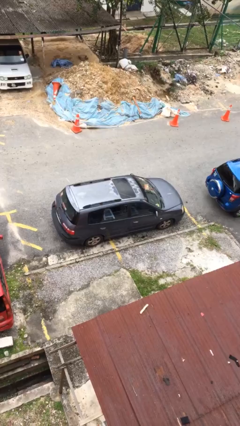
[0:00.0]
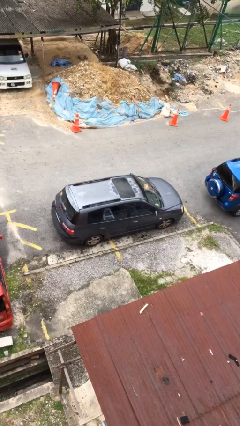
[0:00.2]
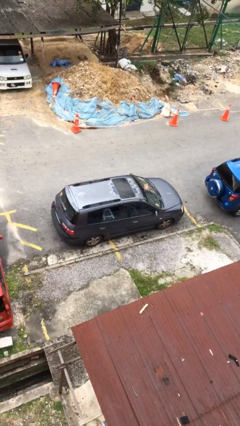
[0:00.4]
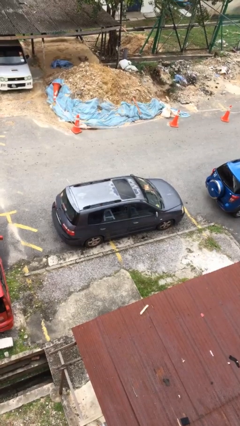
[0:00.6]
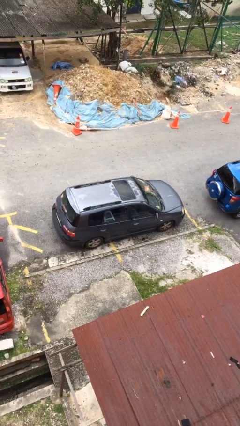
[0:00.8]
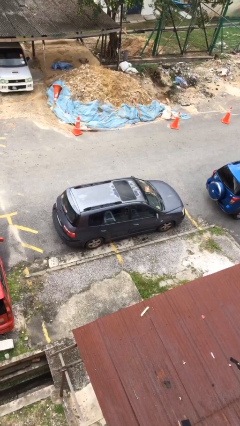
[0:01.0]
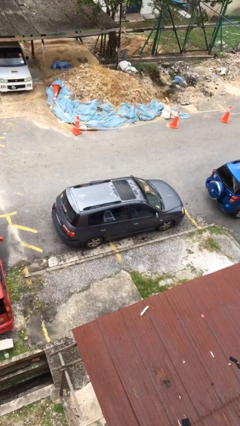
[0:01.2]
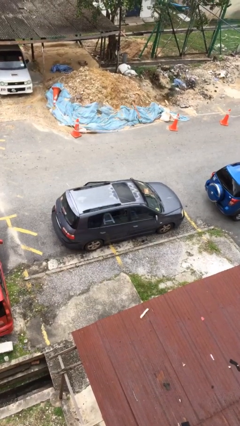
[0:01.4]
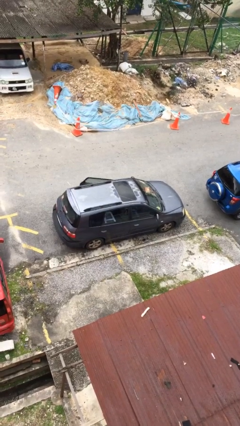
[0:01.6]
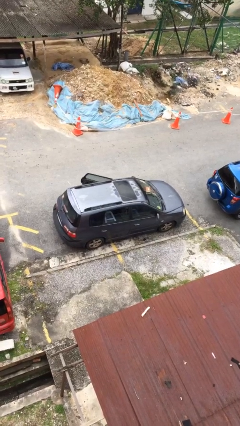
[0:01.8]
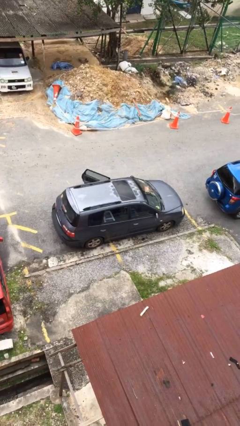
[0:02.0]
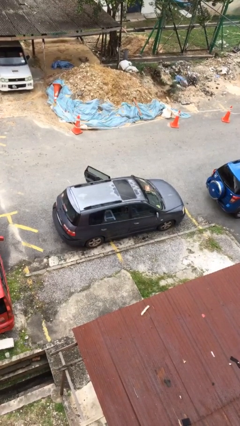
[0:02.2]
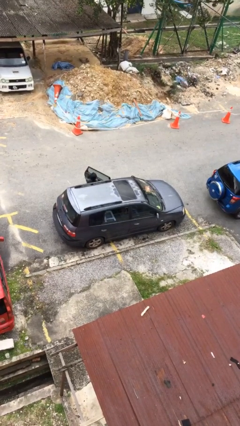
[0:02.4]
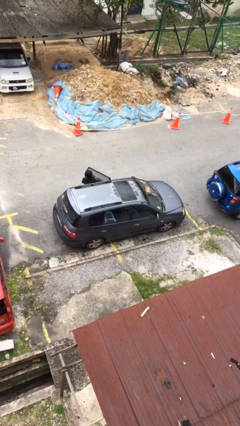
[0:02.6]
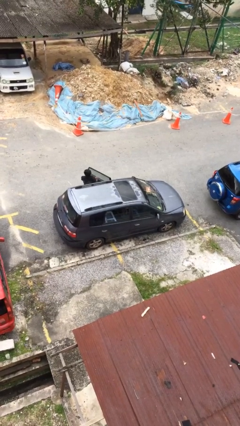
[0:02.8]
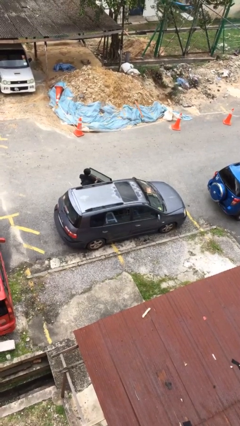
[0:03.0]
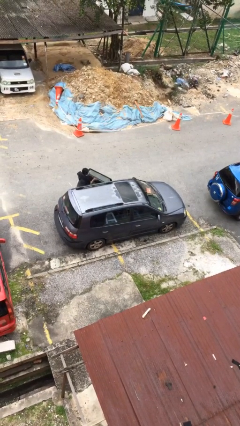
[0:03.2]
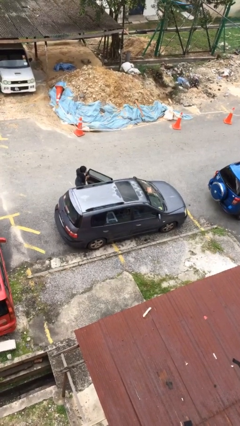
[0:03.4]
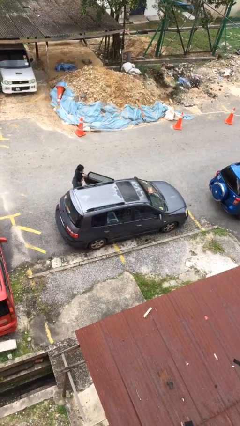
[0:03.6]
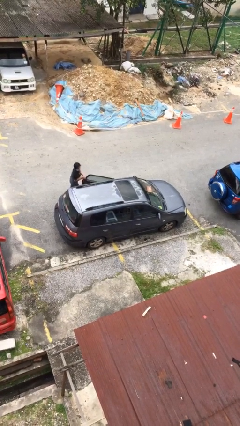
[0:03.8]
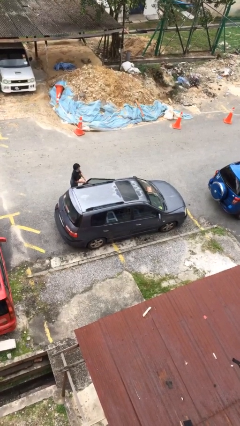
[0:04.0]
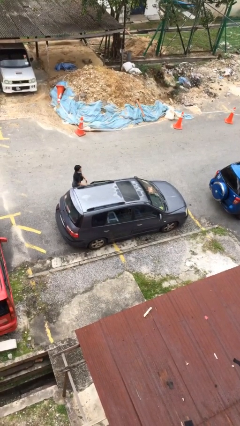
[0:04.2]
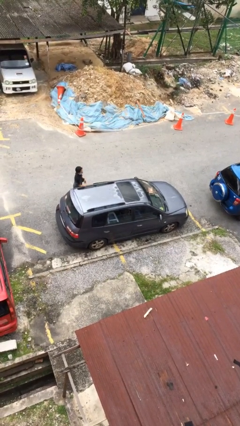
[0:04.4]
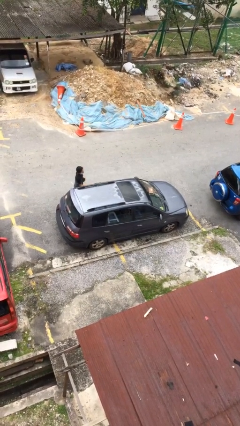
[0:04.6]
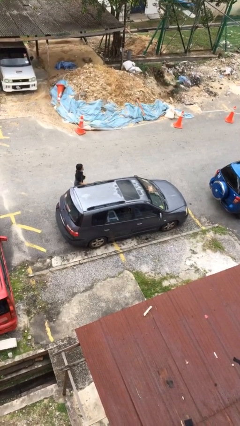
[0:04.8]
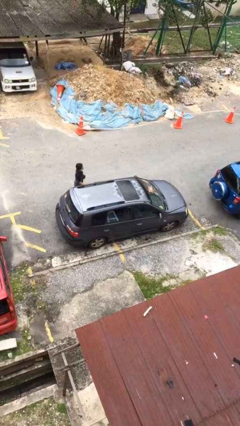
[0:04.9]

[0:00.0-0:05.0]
car drops off person

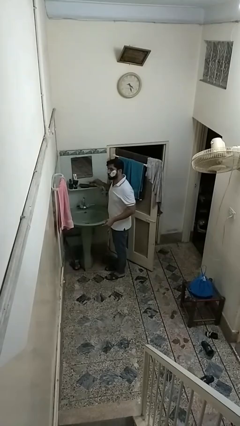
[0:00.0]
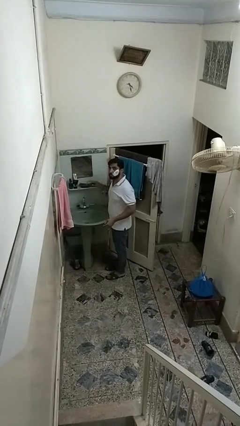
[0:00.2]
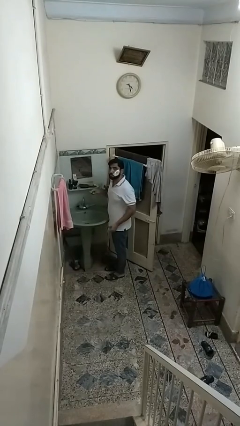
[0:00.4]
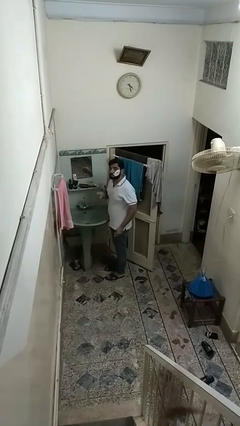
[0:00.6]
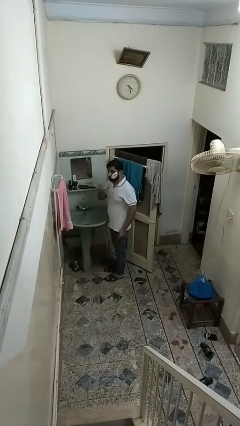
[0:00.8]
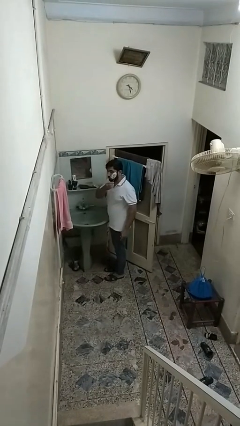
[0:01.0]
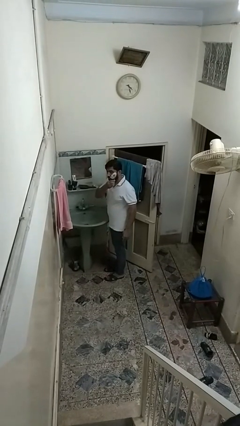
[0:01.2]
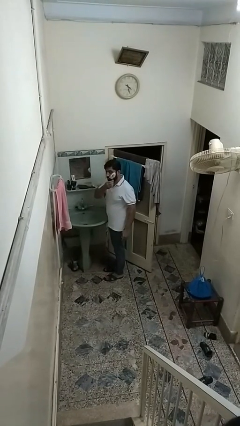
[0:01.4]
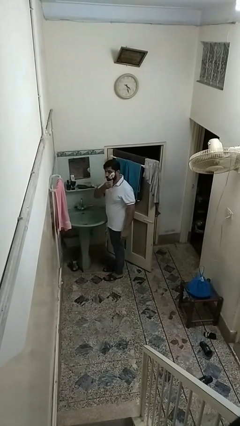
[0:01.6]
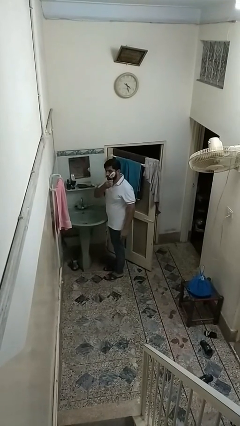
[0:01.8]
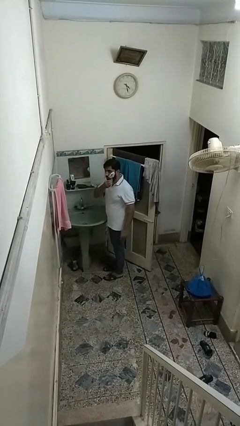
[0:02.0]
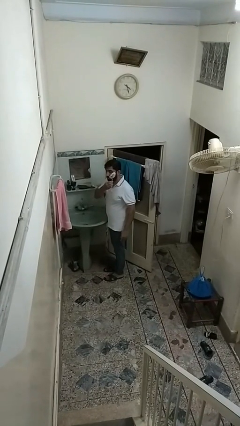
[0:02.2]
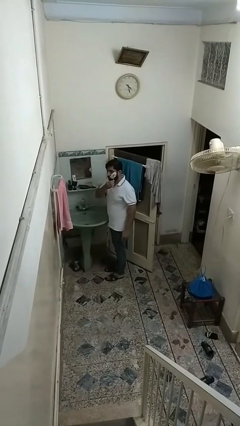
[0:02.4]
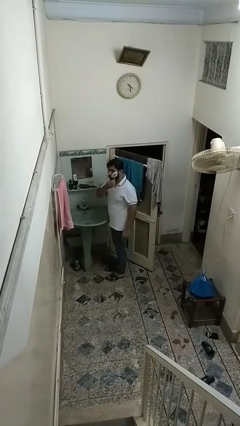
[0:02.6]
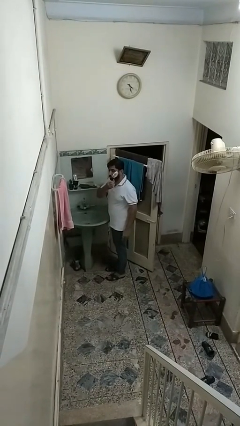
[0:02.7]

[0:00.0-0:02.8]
person shaves face

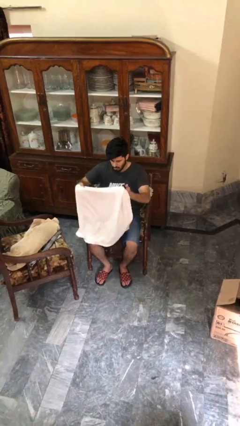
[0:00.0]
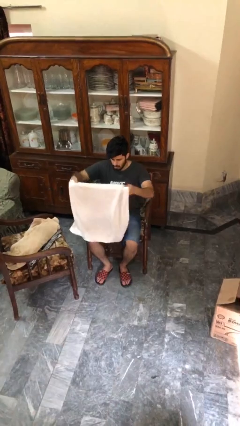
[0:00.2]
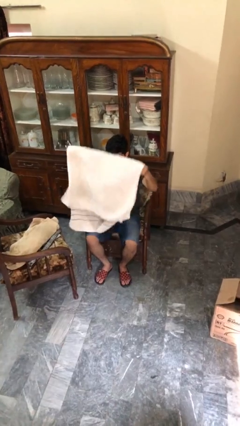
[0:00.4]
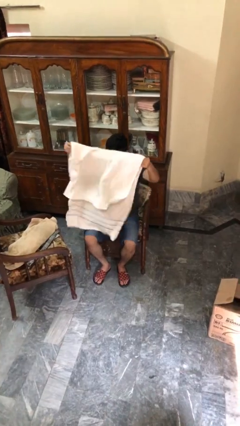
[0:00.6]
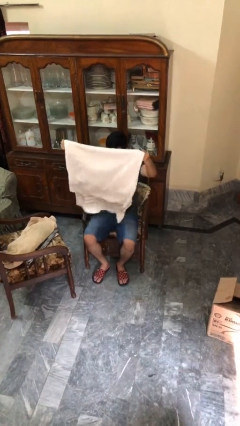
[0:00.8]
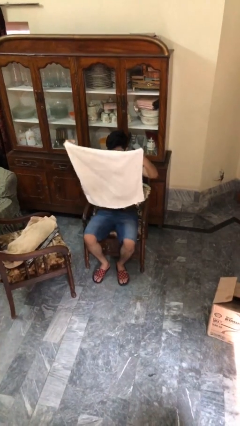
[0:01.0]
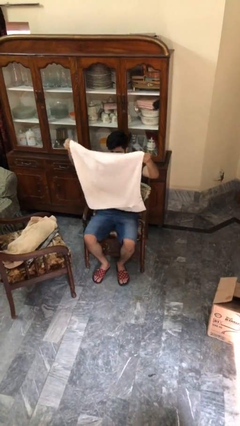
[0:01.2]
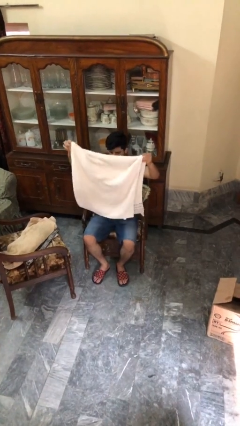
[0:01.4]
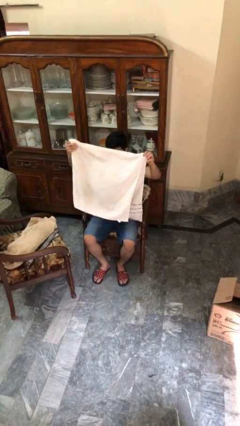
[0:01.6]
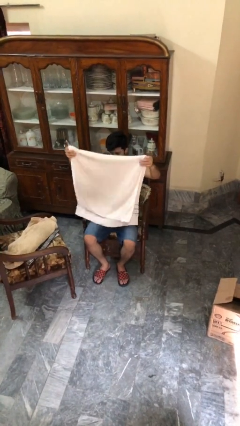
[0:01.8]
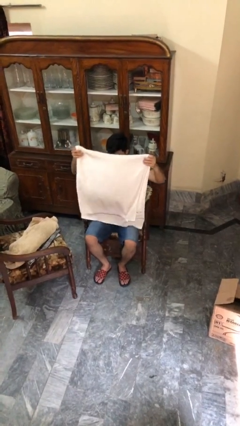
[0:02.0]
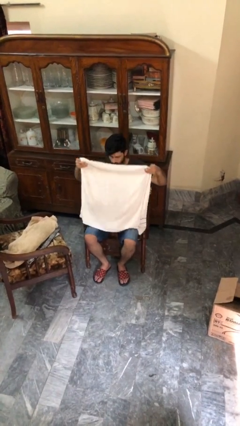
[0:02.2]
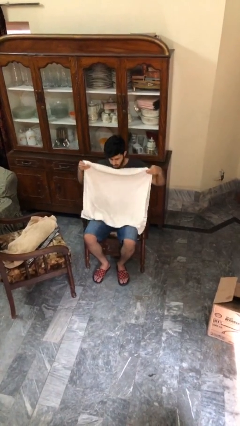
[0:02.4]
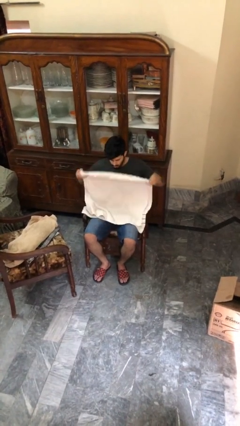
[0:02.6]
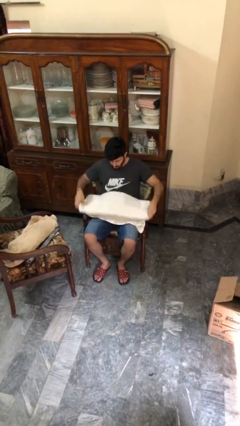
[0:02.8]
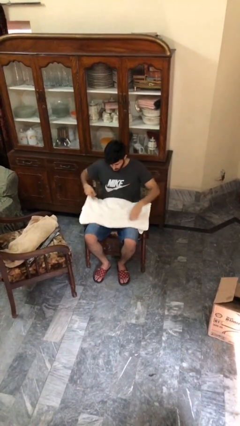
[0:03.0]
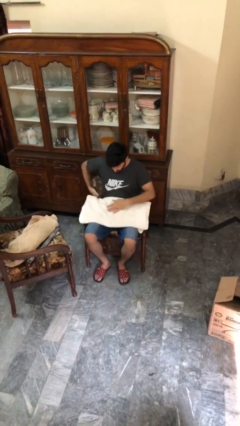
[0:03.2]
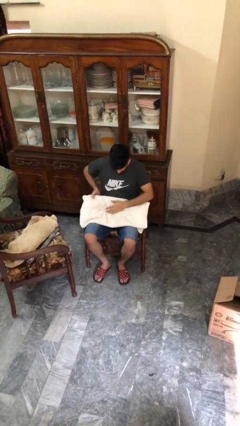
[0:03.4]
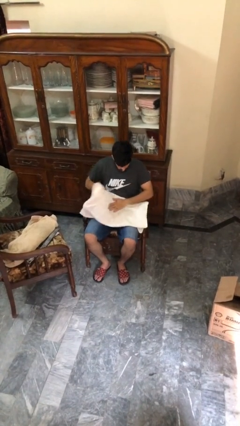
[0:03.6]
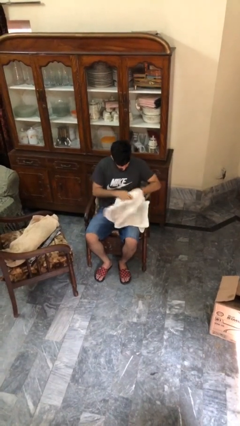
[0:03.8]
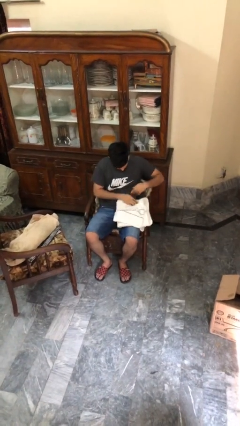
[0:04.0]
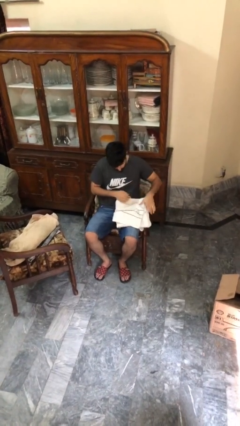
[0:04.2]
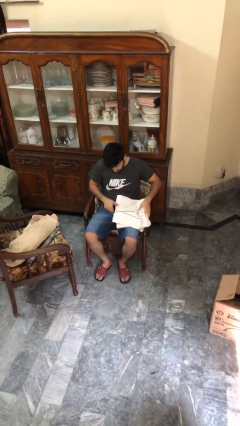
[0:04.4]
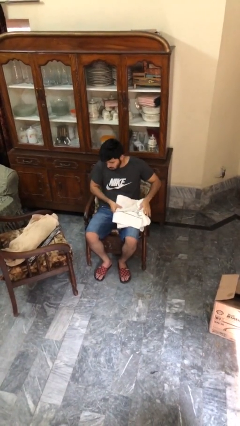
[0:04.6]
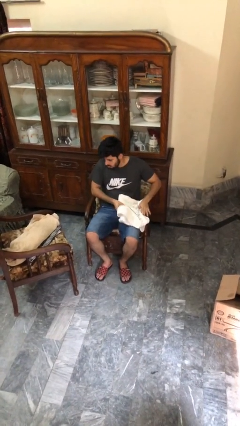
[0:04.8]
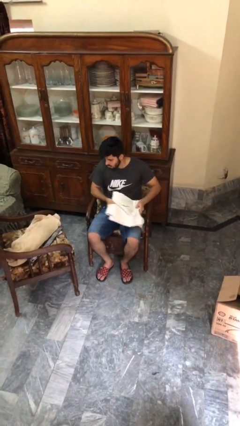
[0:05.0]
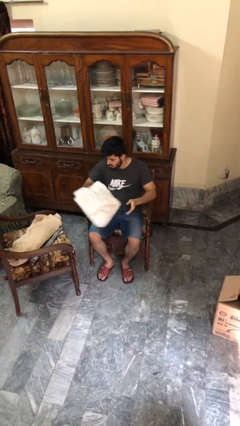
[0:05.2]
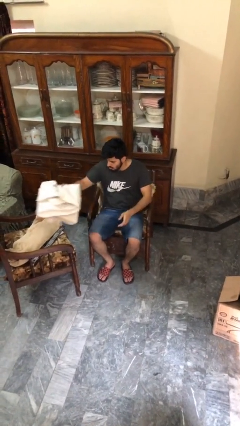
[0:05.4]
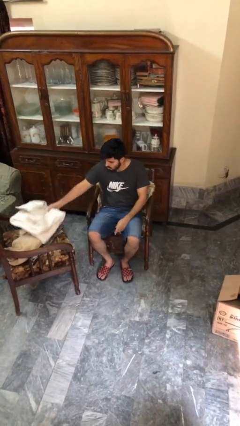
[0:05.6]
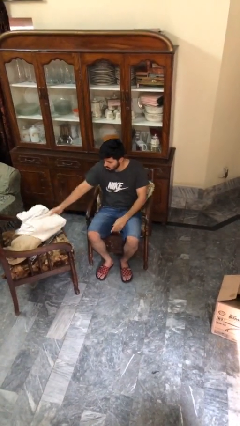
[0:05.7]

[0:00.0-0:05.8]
person folds towel

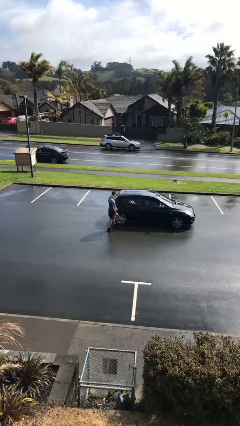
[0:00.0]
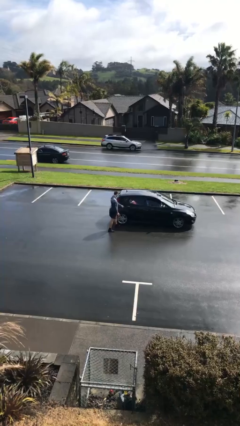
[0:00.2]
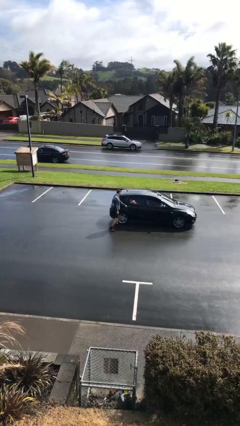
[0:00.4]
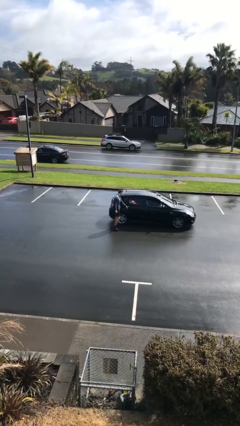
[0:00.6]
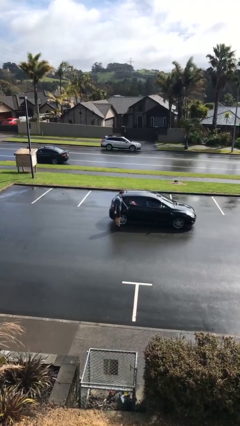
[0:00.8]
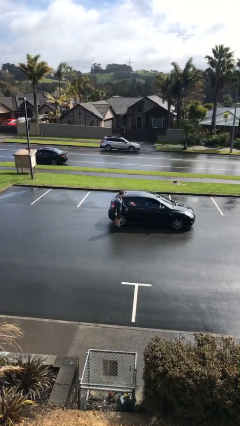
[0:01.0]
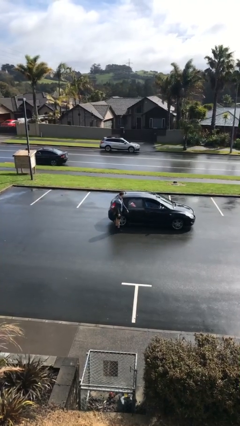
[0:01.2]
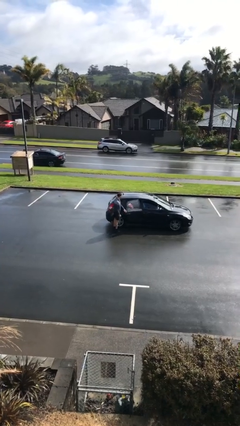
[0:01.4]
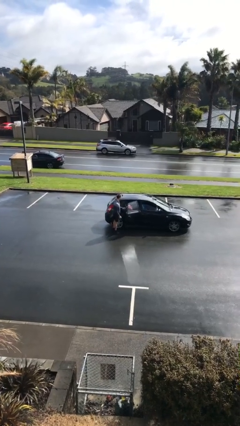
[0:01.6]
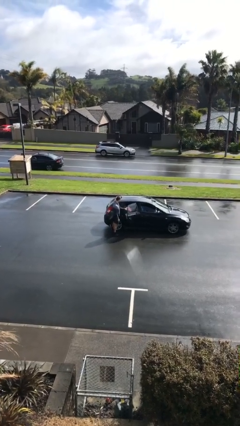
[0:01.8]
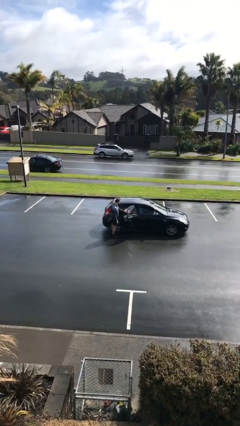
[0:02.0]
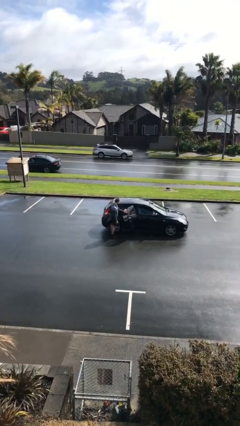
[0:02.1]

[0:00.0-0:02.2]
person opens car door

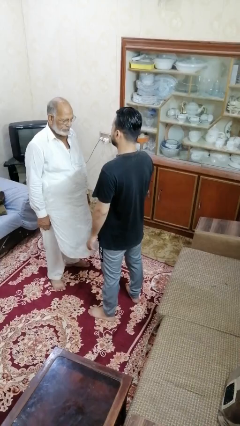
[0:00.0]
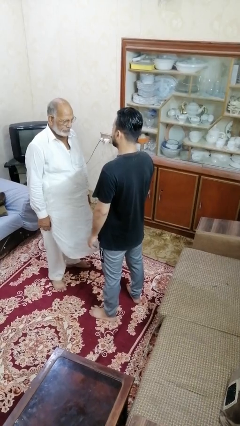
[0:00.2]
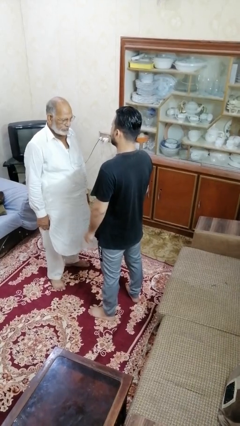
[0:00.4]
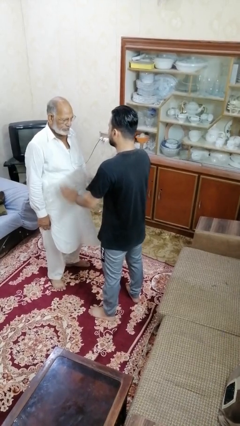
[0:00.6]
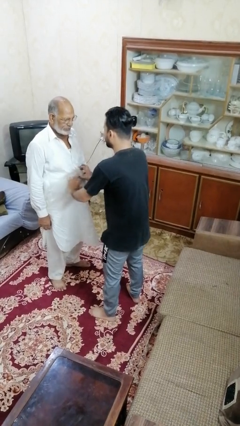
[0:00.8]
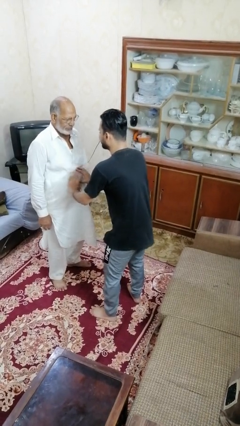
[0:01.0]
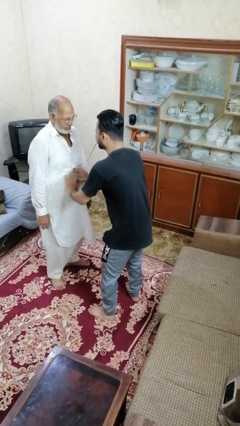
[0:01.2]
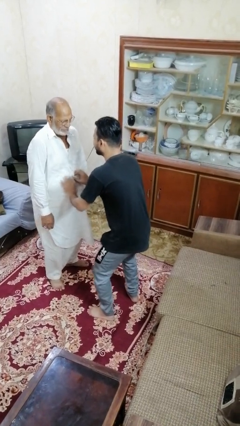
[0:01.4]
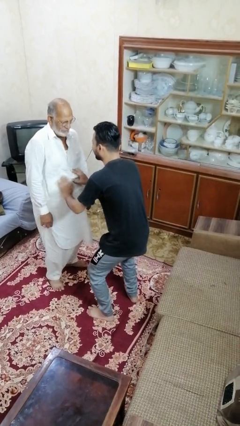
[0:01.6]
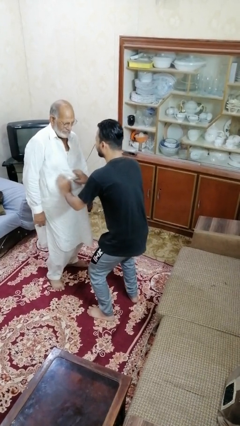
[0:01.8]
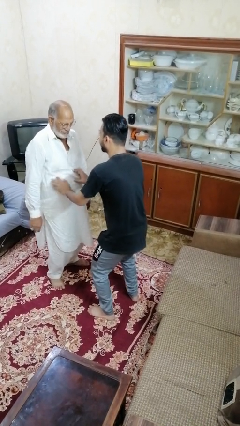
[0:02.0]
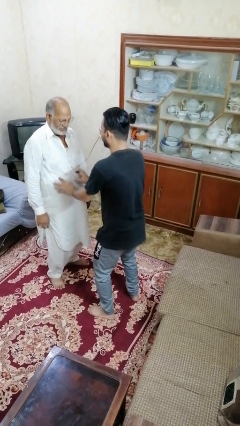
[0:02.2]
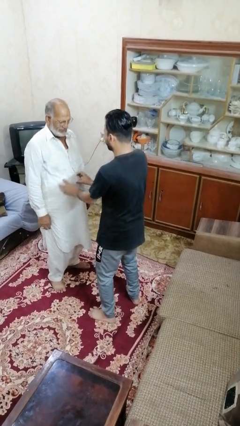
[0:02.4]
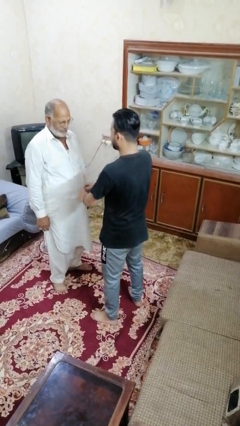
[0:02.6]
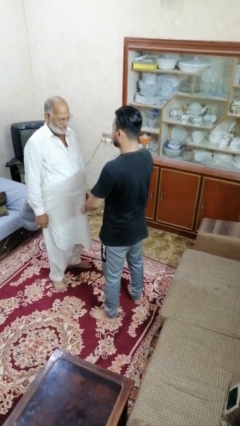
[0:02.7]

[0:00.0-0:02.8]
person tickles person
